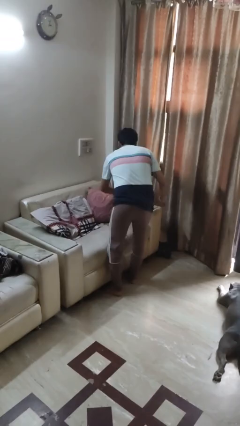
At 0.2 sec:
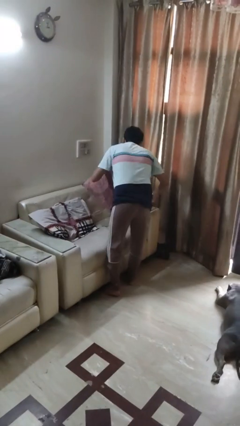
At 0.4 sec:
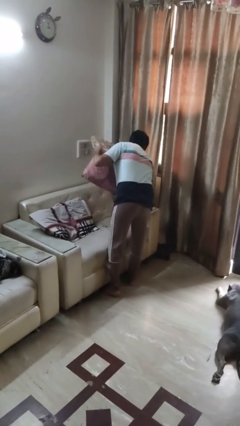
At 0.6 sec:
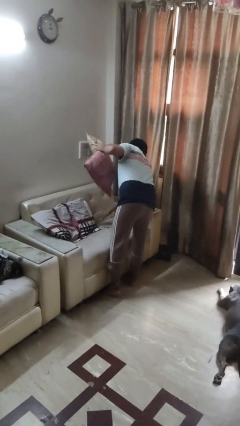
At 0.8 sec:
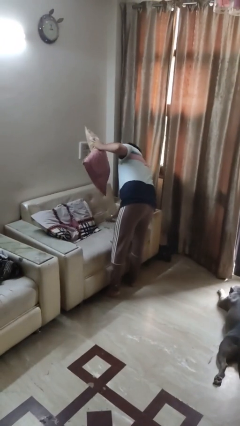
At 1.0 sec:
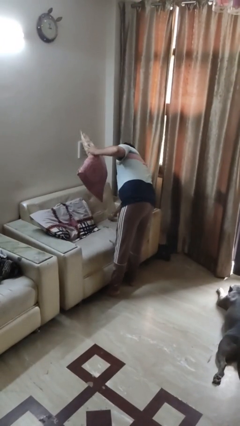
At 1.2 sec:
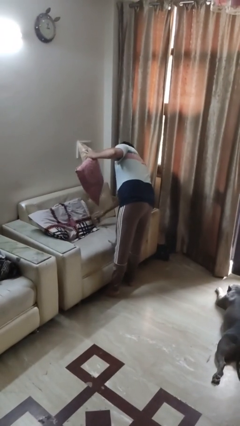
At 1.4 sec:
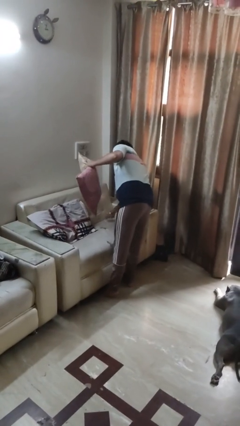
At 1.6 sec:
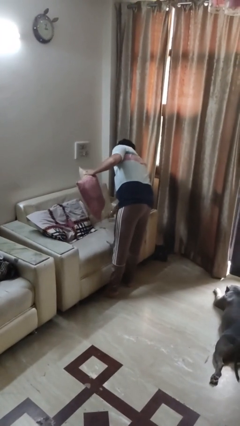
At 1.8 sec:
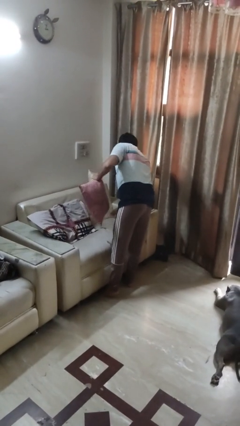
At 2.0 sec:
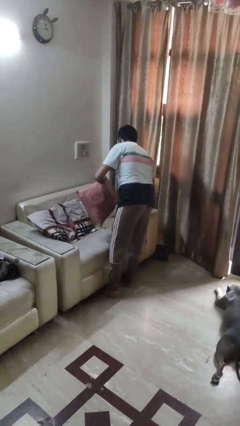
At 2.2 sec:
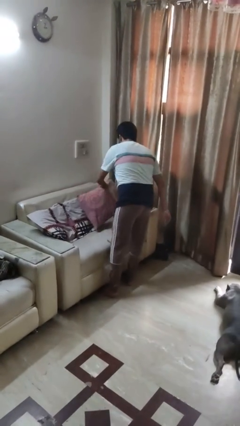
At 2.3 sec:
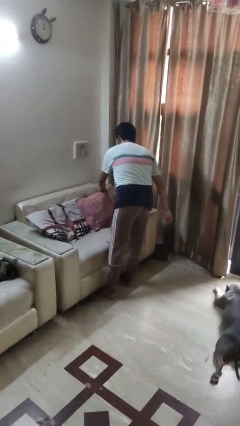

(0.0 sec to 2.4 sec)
person searches in couch

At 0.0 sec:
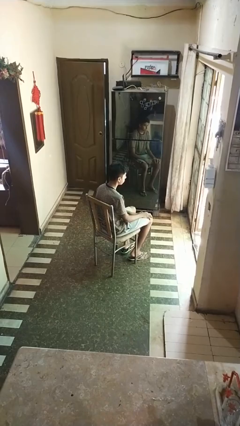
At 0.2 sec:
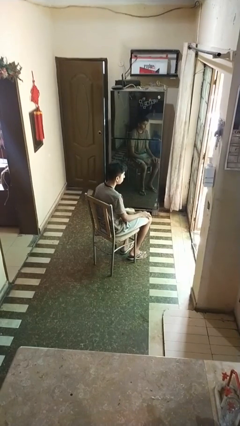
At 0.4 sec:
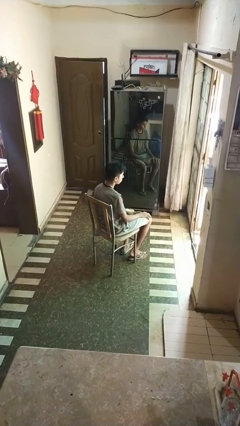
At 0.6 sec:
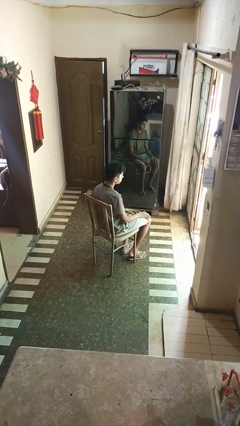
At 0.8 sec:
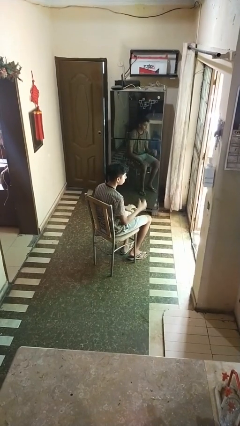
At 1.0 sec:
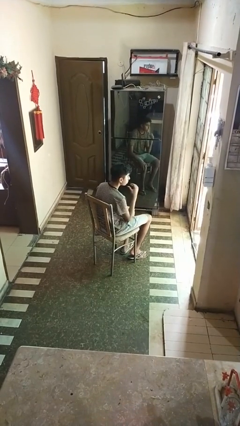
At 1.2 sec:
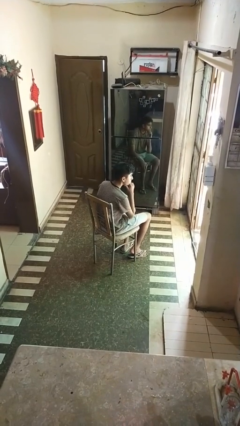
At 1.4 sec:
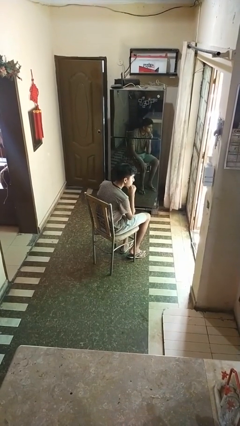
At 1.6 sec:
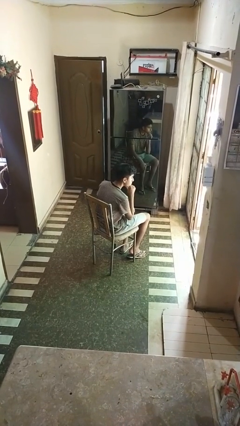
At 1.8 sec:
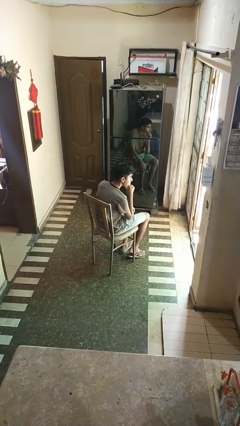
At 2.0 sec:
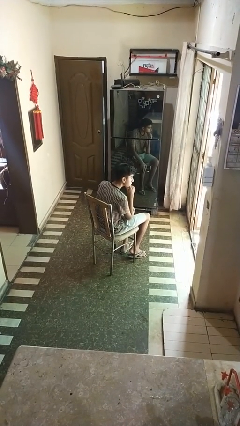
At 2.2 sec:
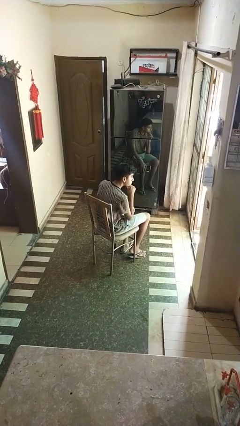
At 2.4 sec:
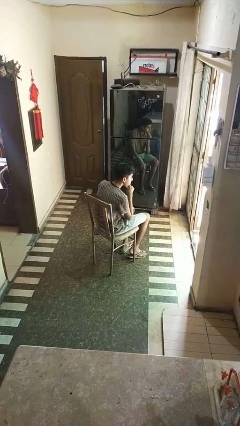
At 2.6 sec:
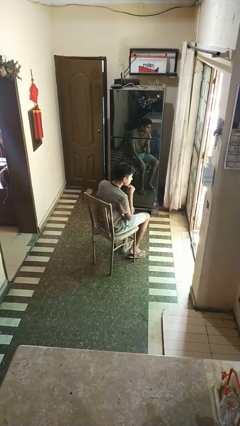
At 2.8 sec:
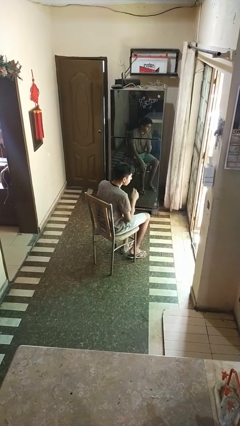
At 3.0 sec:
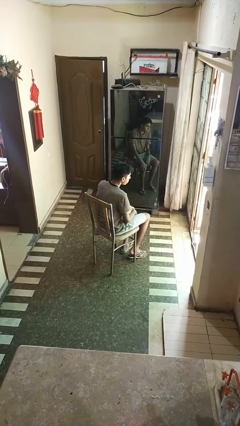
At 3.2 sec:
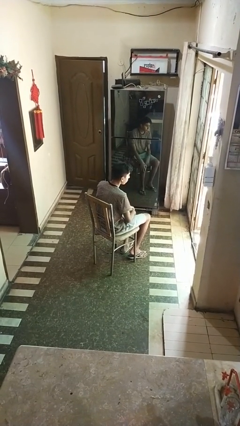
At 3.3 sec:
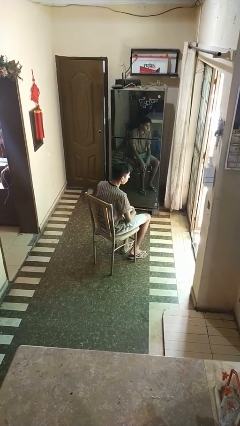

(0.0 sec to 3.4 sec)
person strokes chin

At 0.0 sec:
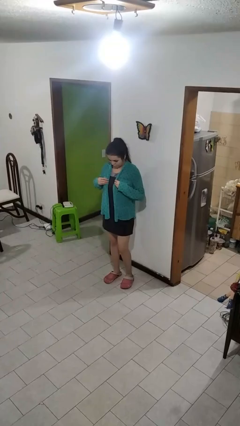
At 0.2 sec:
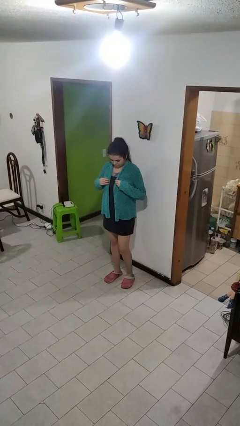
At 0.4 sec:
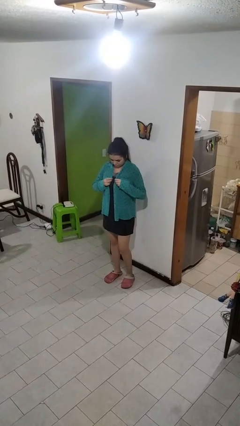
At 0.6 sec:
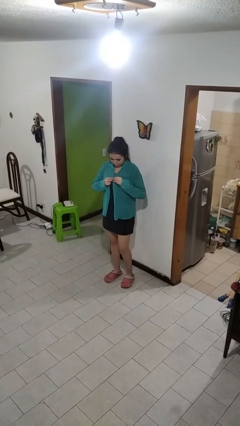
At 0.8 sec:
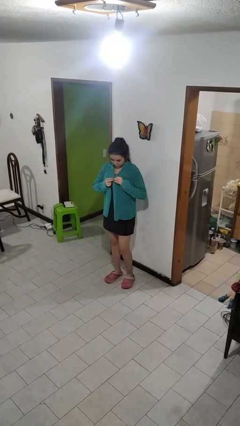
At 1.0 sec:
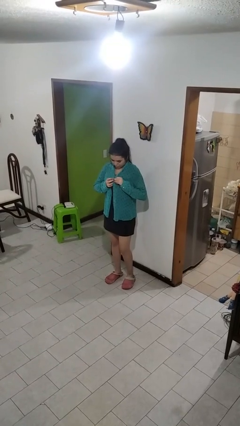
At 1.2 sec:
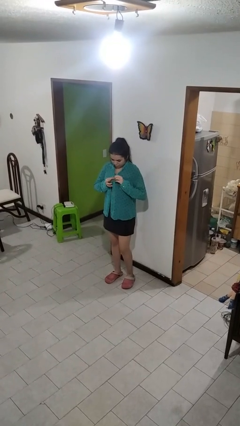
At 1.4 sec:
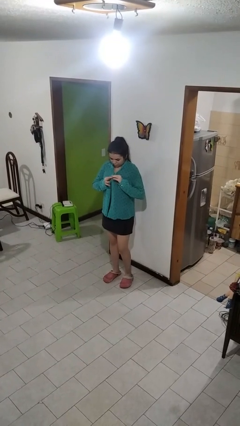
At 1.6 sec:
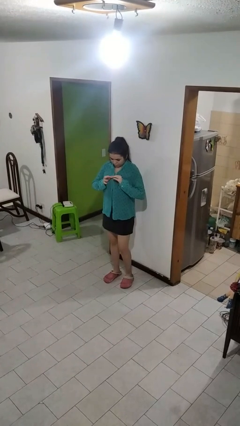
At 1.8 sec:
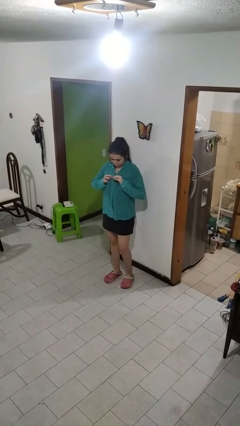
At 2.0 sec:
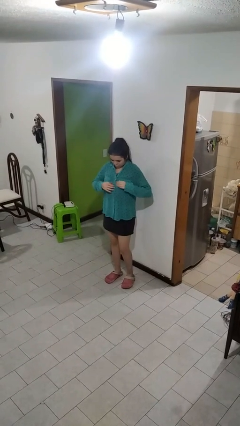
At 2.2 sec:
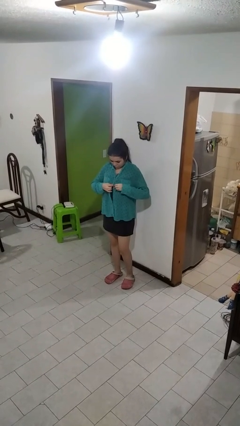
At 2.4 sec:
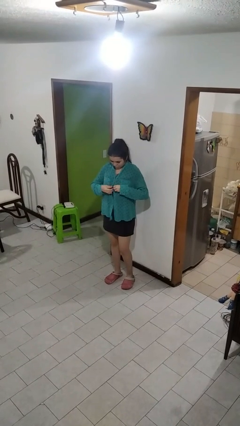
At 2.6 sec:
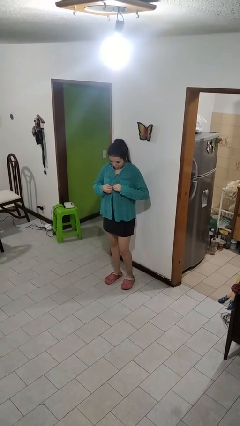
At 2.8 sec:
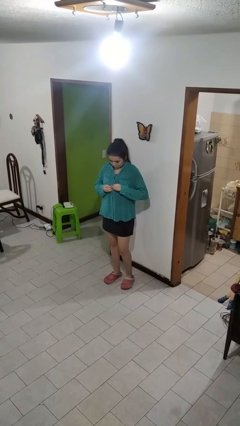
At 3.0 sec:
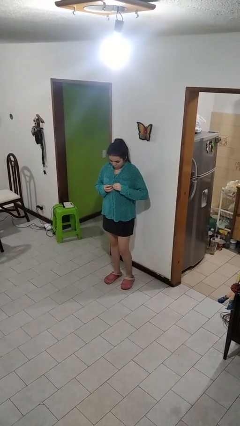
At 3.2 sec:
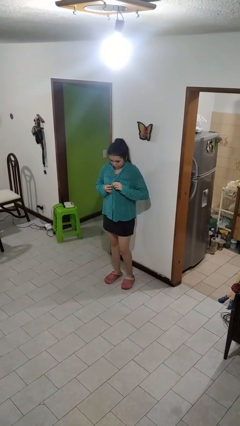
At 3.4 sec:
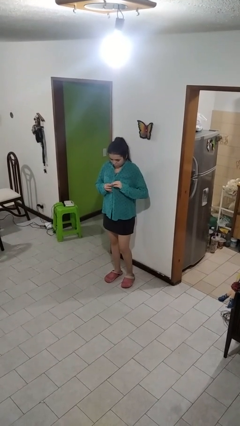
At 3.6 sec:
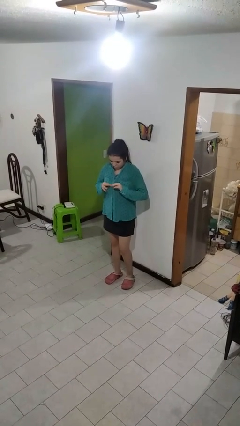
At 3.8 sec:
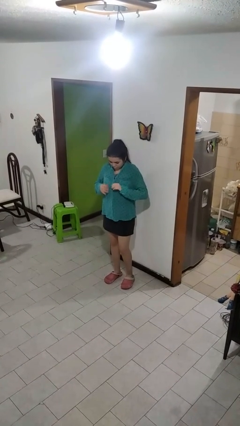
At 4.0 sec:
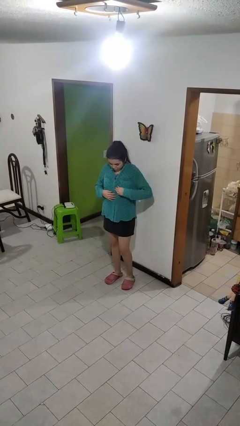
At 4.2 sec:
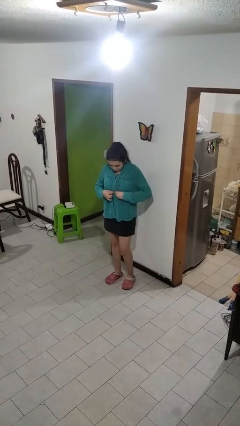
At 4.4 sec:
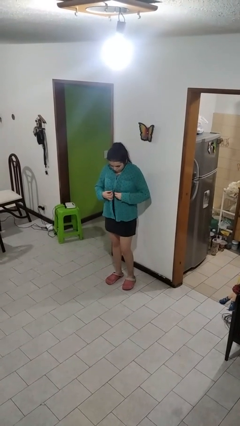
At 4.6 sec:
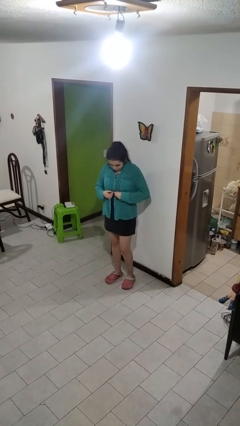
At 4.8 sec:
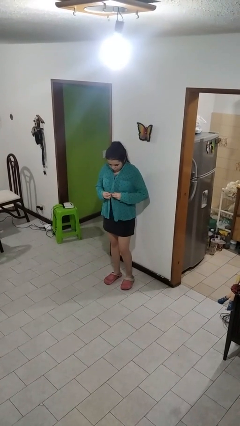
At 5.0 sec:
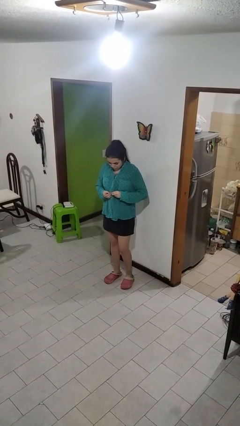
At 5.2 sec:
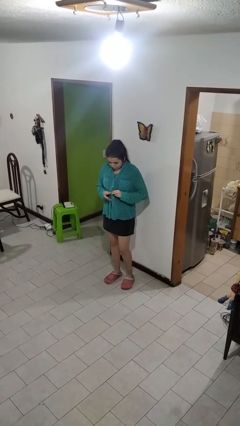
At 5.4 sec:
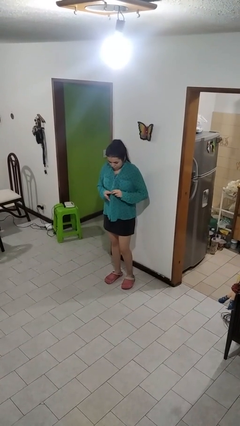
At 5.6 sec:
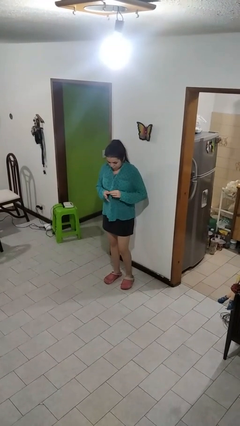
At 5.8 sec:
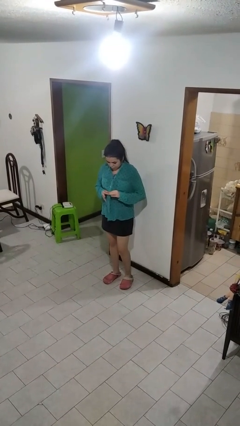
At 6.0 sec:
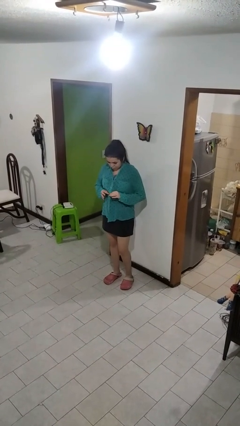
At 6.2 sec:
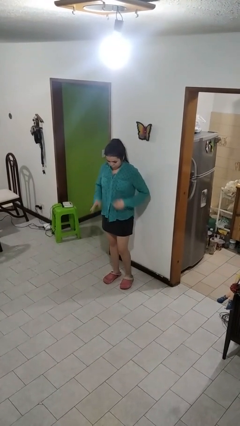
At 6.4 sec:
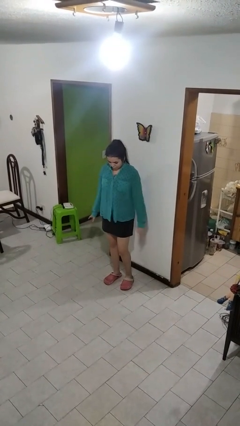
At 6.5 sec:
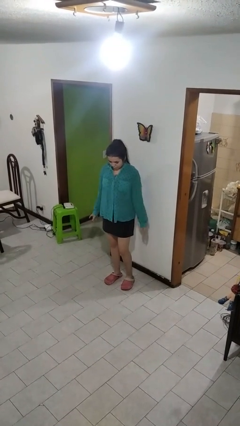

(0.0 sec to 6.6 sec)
person buttons shirt

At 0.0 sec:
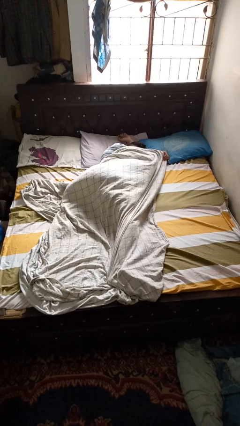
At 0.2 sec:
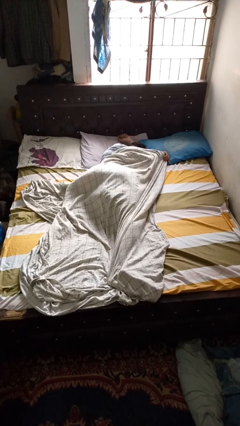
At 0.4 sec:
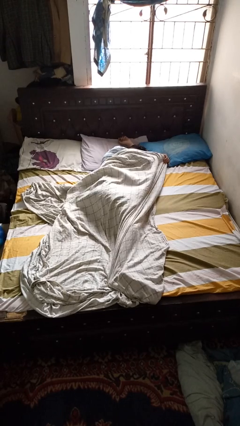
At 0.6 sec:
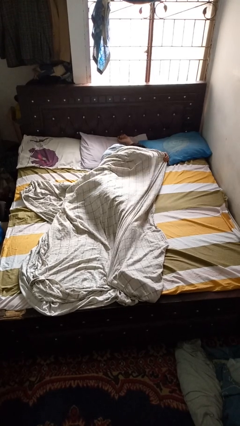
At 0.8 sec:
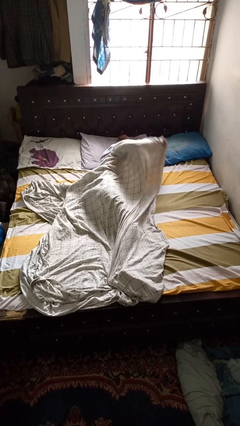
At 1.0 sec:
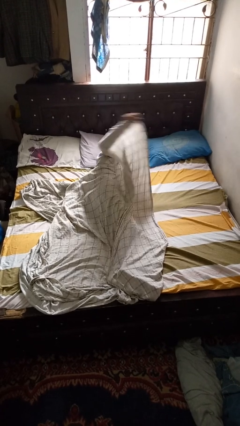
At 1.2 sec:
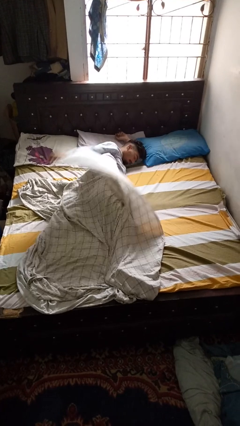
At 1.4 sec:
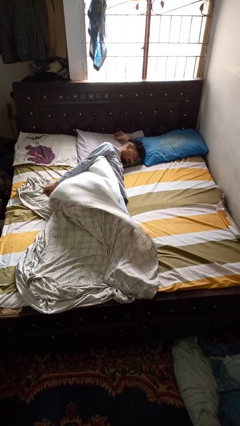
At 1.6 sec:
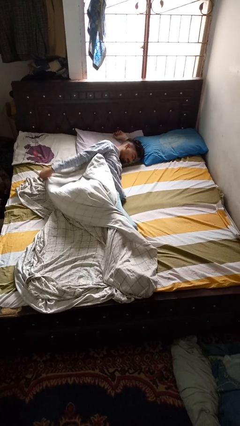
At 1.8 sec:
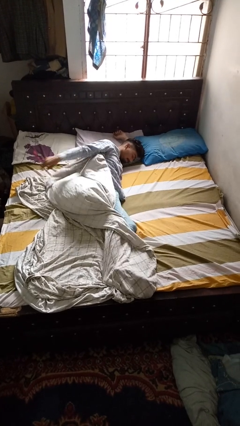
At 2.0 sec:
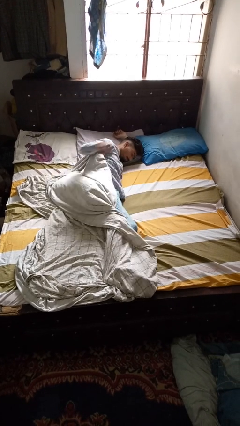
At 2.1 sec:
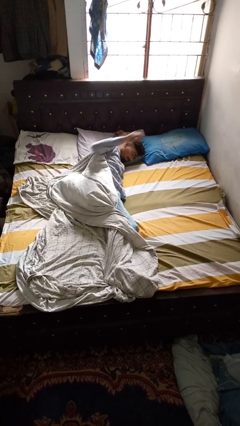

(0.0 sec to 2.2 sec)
person uncovers with bedsheets

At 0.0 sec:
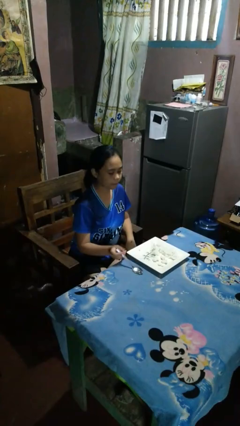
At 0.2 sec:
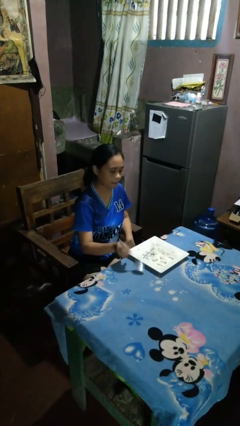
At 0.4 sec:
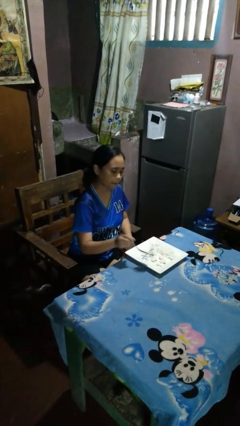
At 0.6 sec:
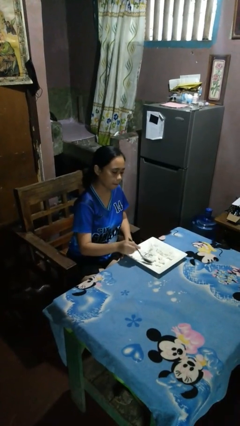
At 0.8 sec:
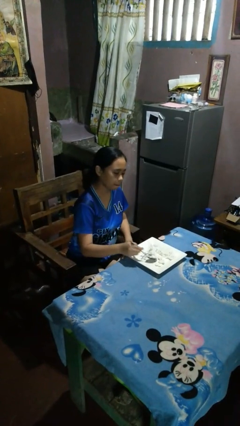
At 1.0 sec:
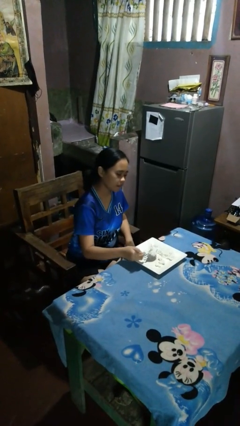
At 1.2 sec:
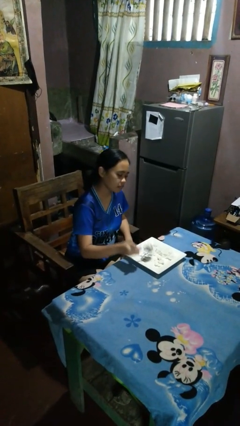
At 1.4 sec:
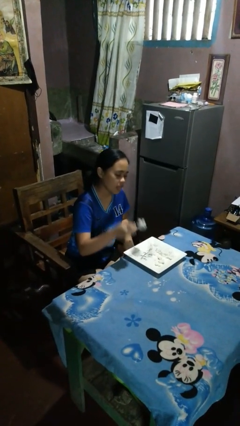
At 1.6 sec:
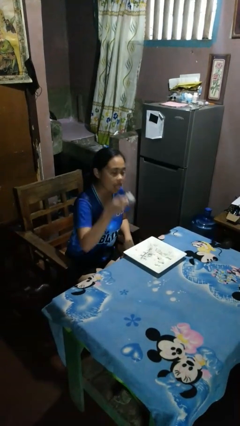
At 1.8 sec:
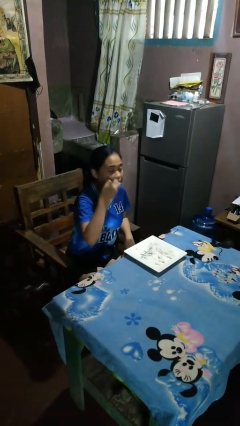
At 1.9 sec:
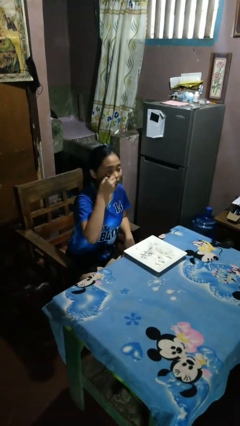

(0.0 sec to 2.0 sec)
person eats with utensil

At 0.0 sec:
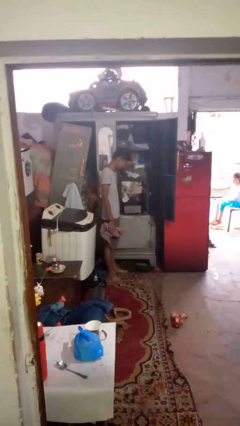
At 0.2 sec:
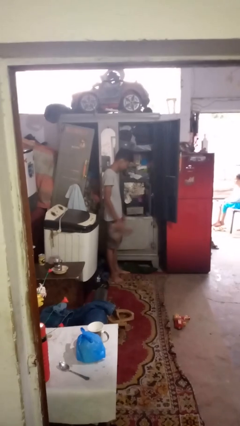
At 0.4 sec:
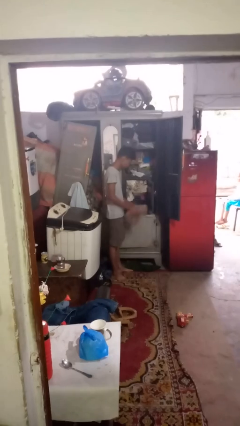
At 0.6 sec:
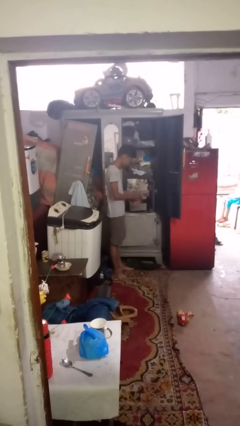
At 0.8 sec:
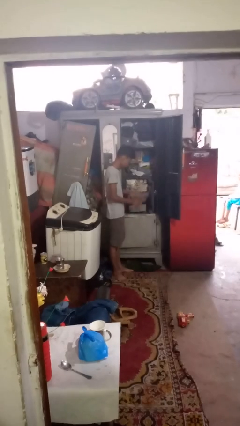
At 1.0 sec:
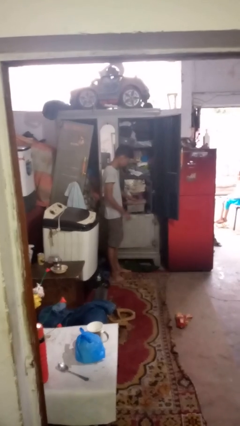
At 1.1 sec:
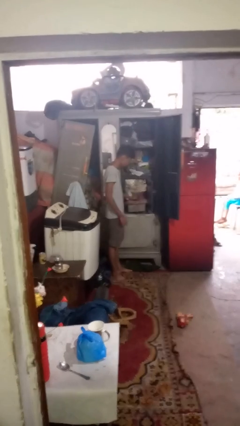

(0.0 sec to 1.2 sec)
person puts clothes into dresser
